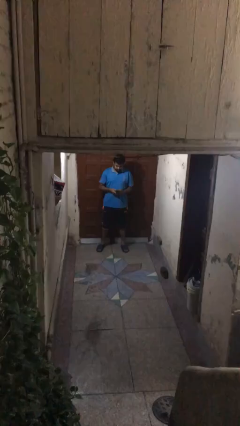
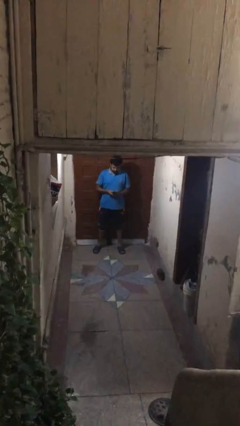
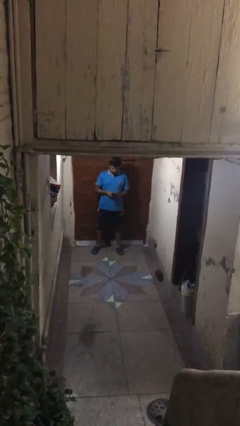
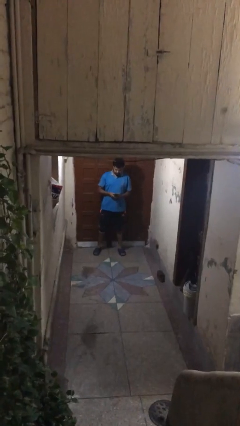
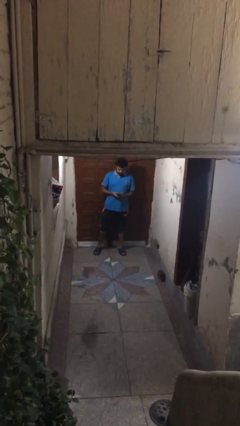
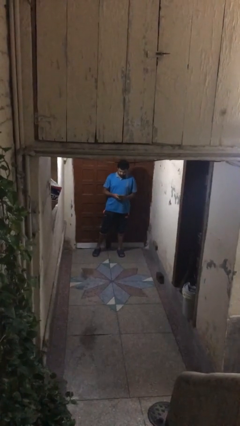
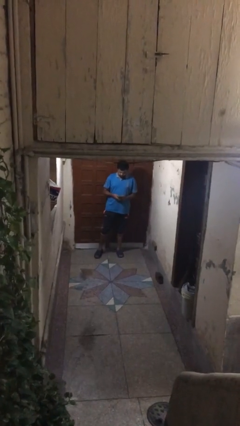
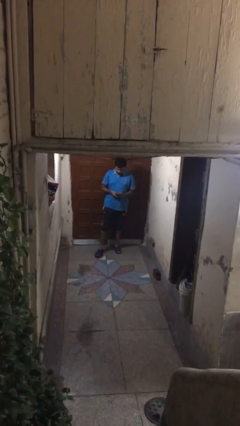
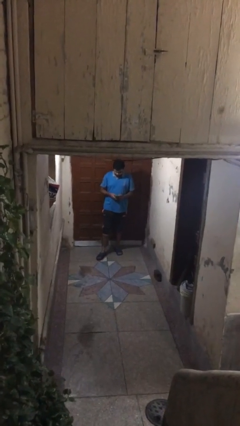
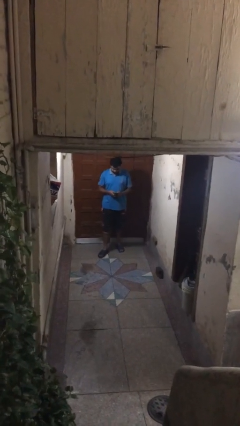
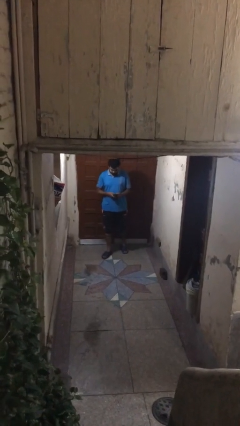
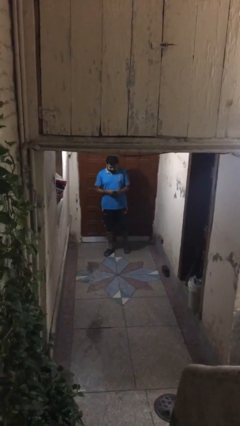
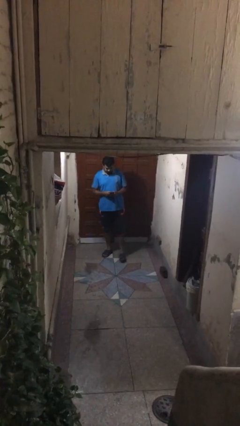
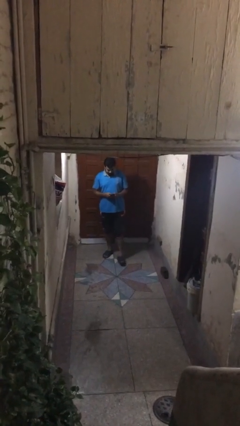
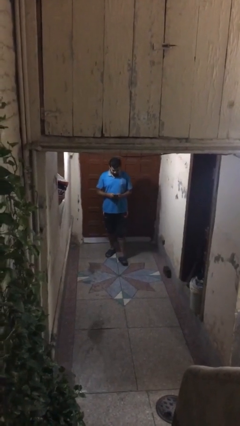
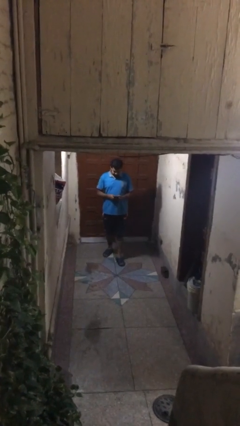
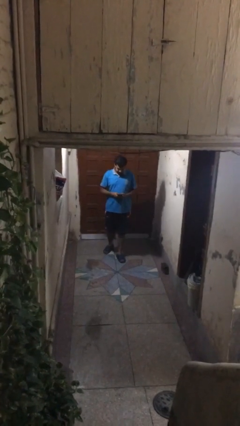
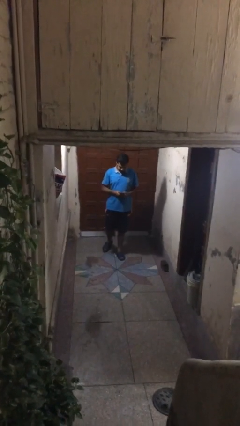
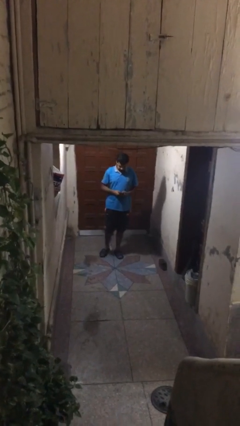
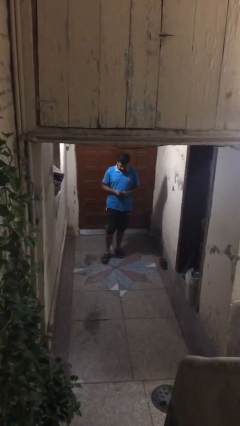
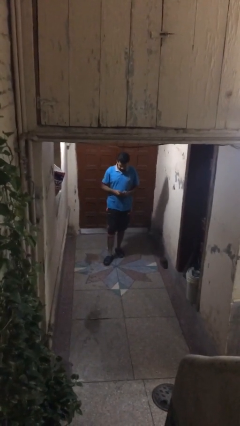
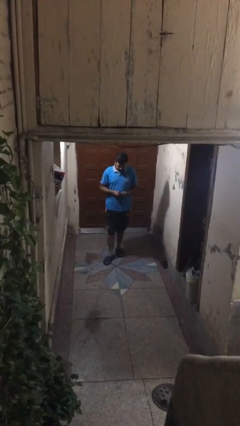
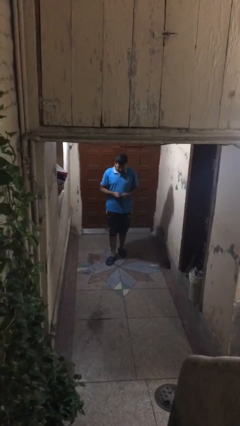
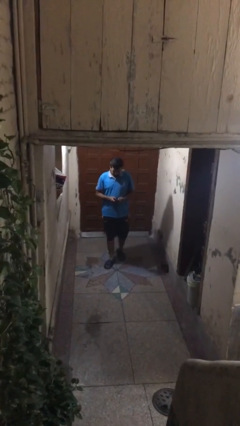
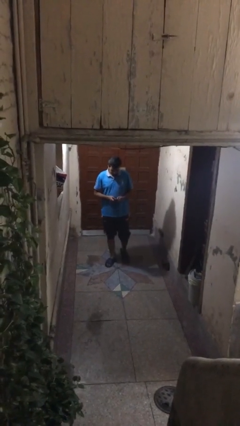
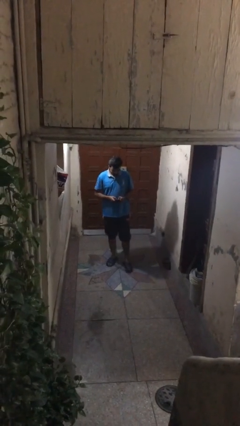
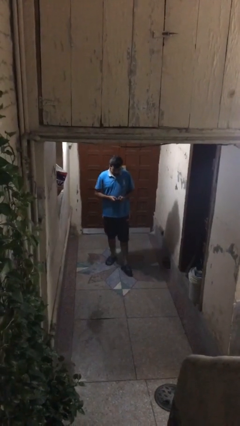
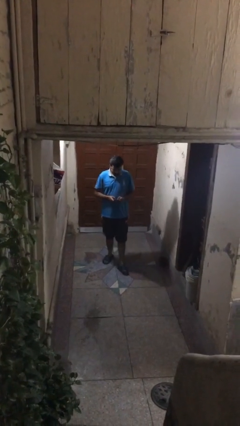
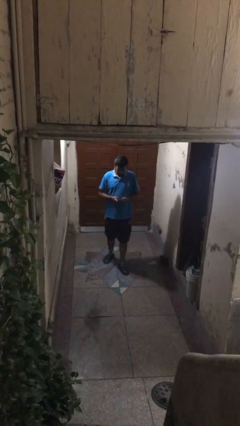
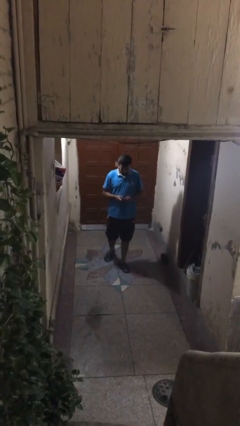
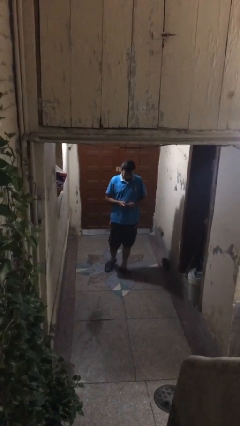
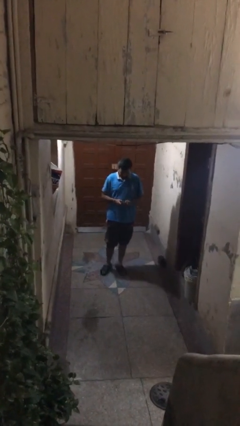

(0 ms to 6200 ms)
person texts on phone

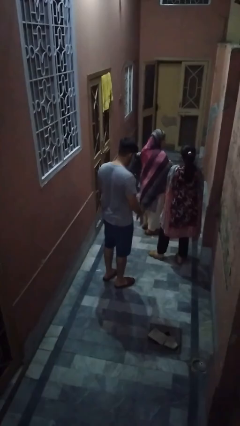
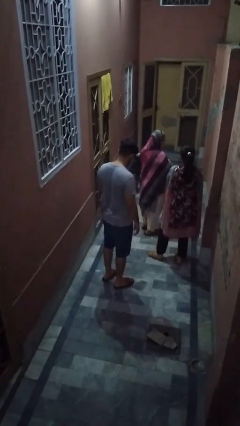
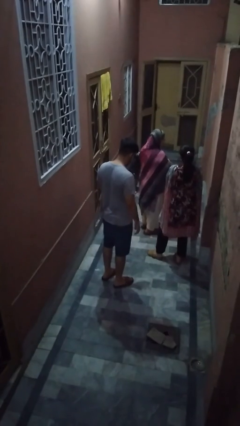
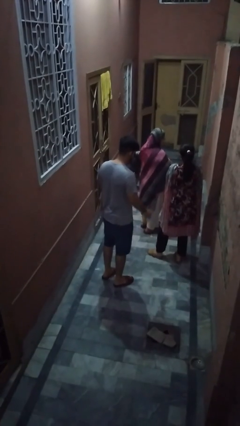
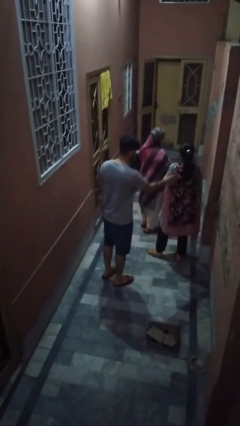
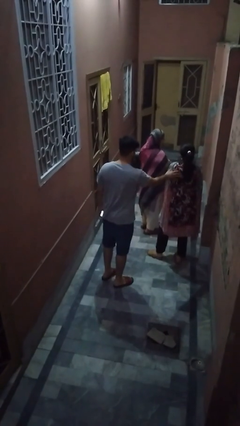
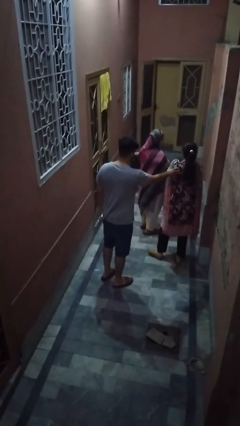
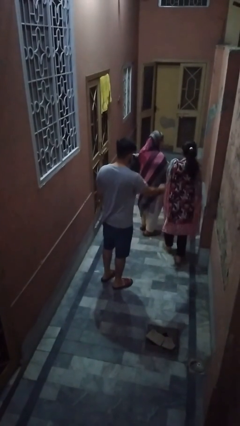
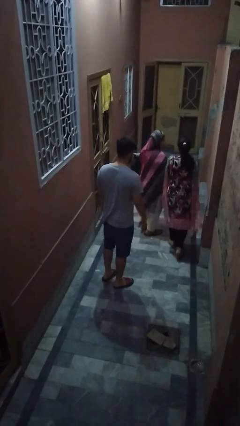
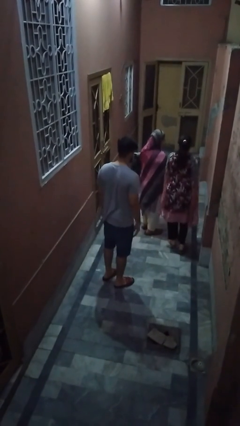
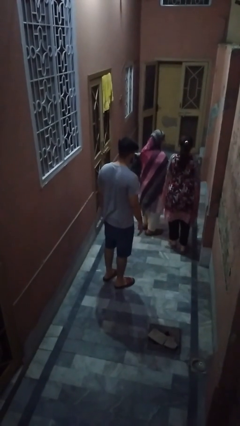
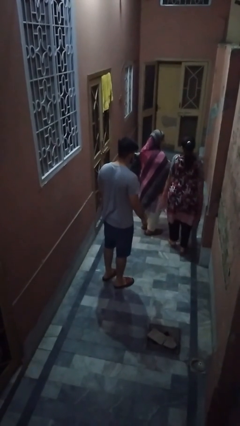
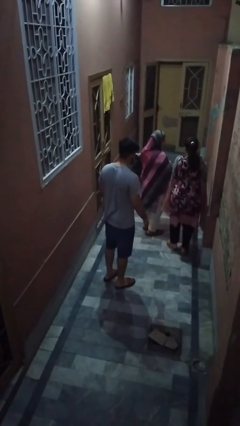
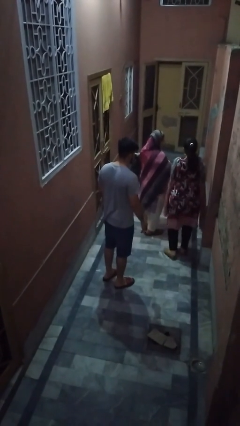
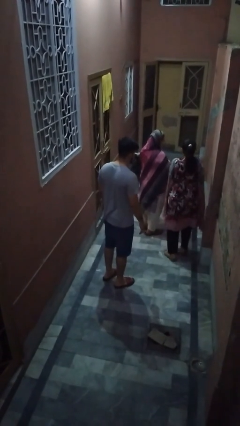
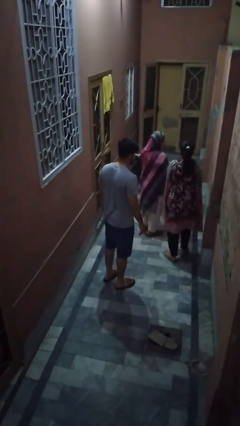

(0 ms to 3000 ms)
person shoves person

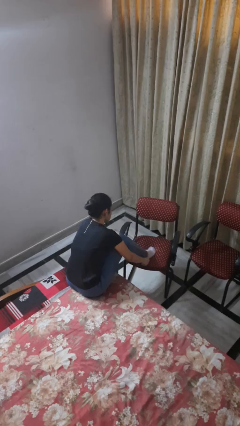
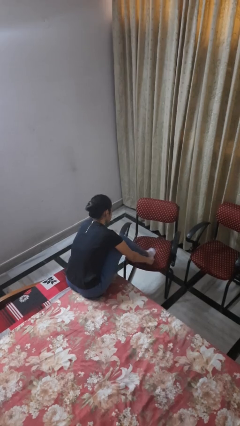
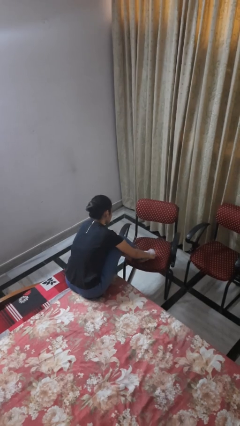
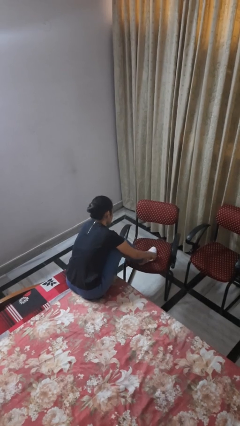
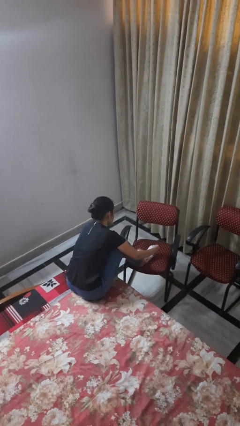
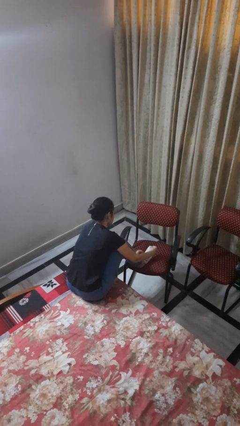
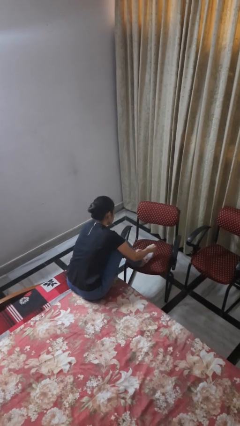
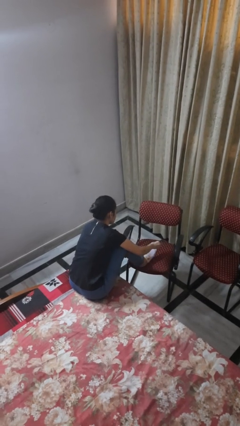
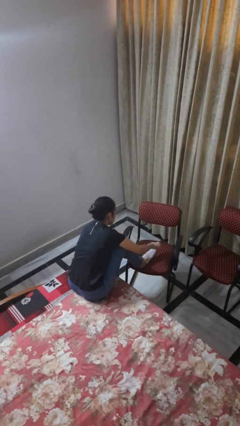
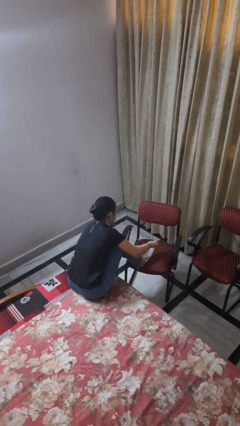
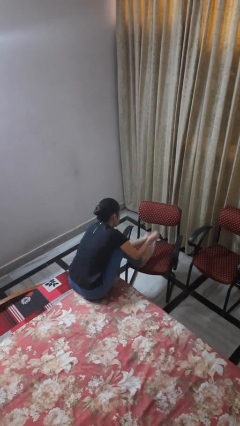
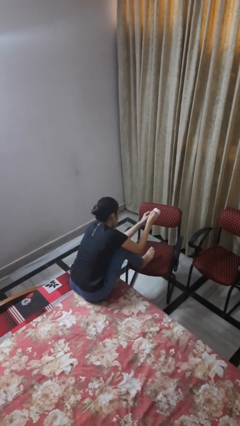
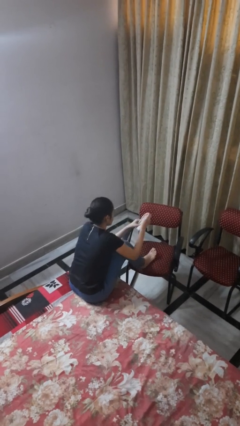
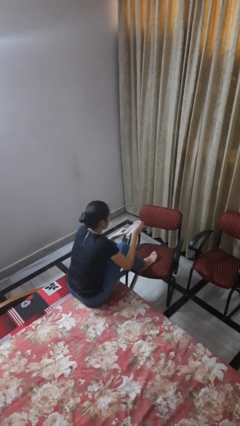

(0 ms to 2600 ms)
person takes off socks

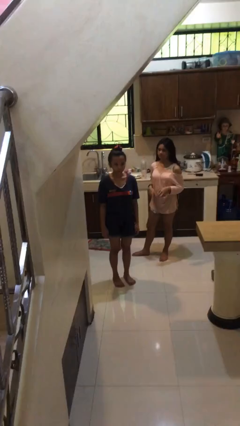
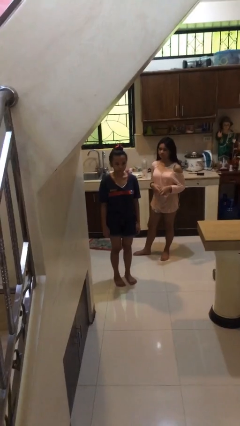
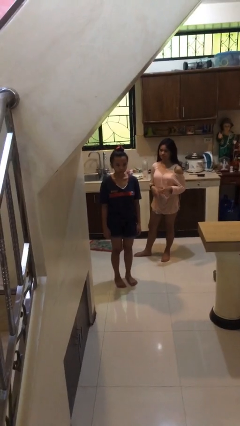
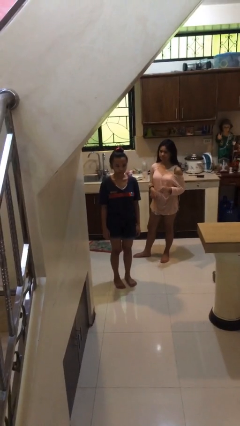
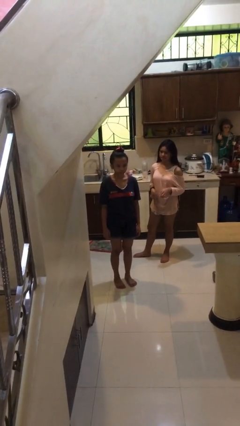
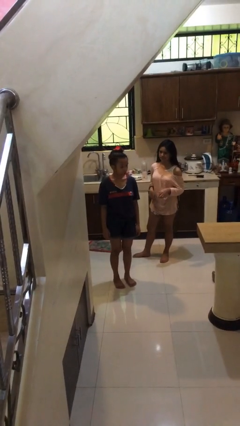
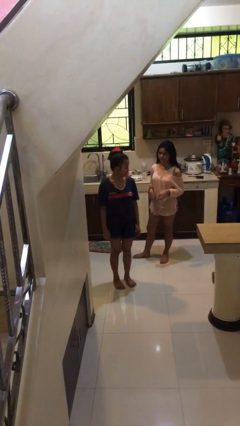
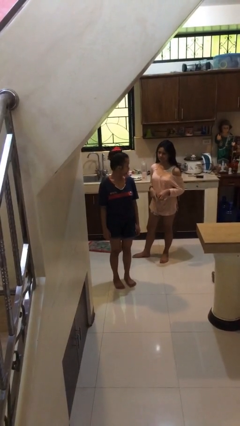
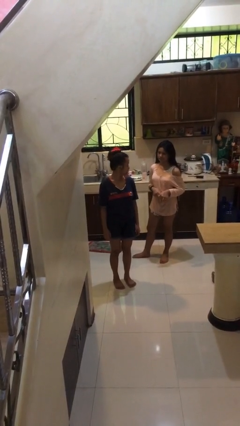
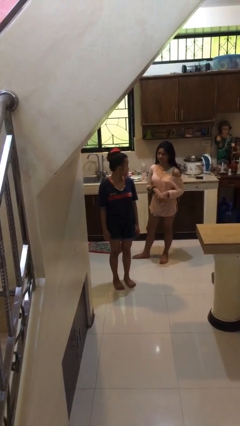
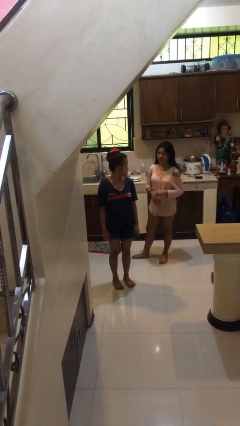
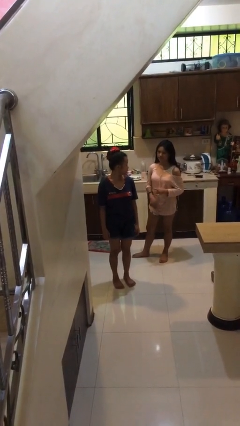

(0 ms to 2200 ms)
person looks over shoulder

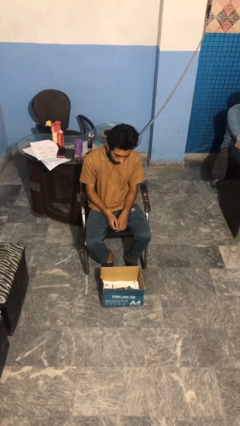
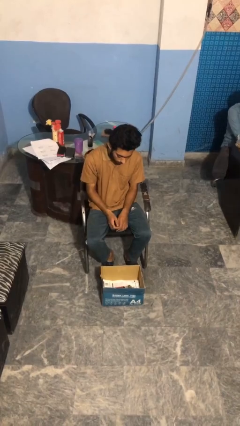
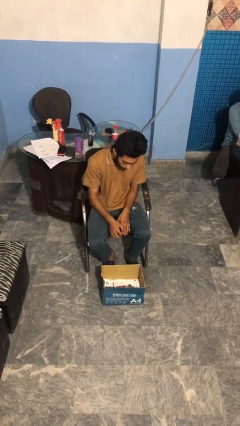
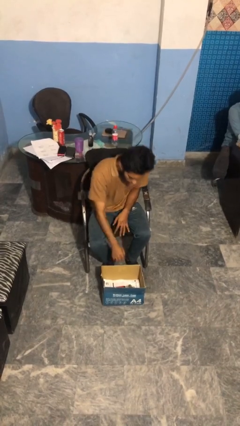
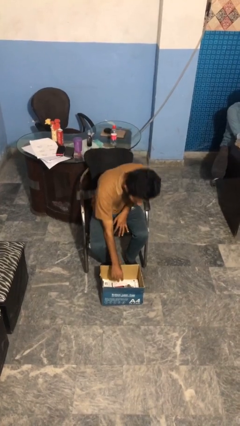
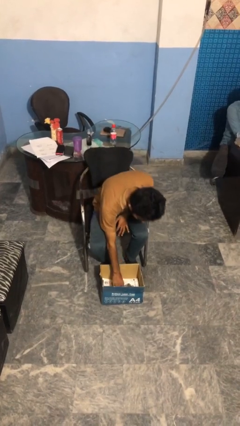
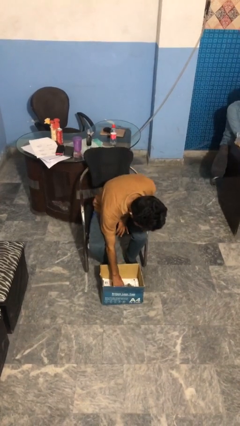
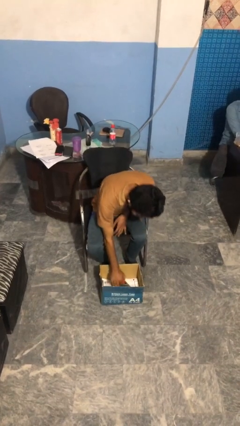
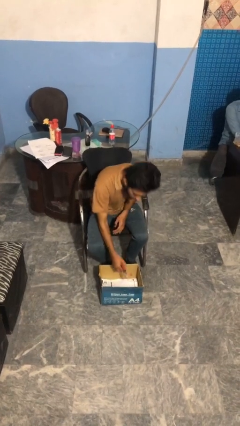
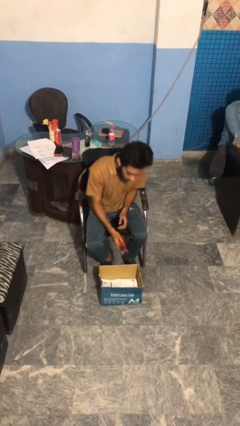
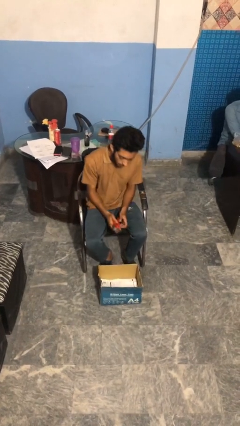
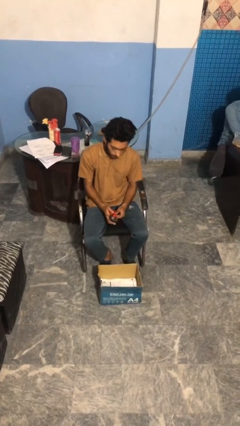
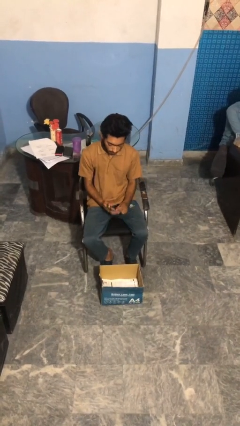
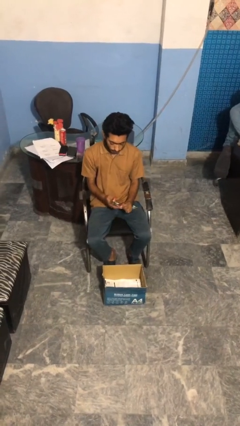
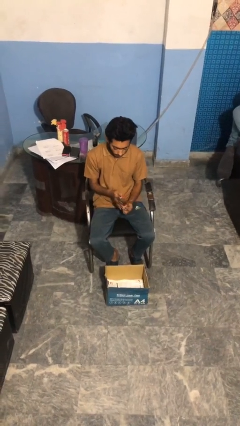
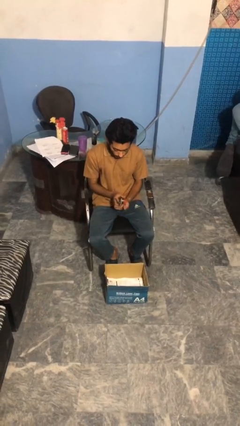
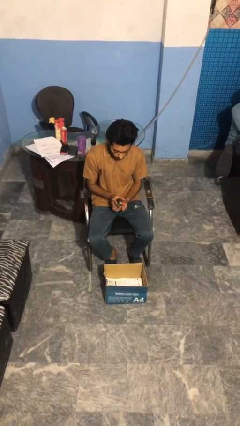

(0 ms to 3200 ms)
person takes object from box

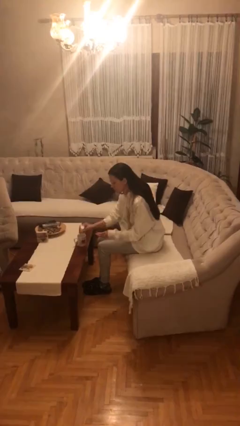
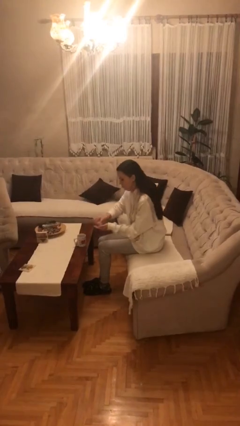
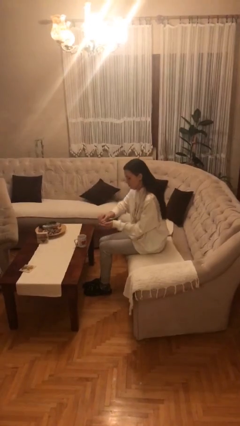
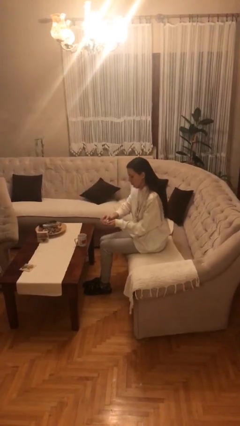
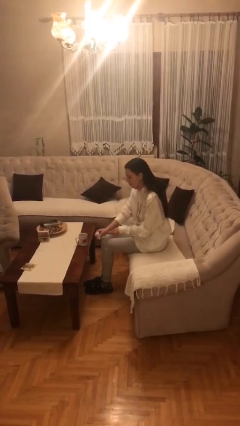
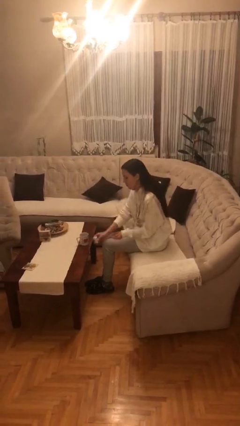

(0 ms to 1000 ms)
person takes medicine pills
